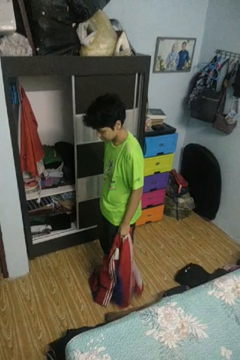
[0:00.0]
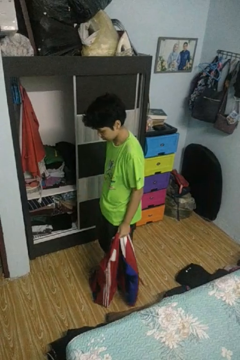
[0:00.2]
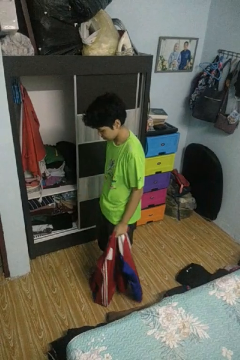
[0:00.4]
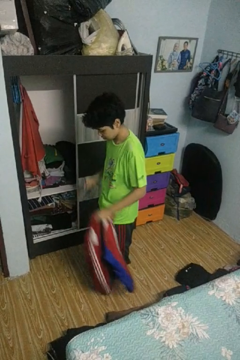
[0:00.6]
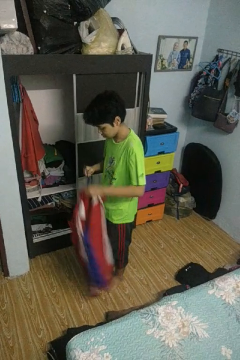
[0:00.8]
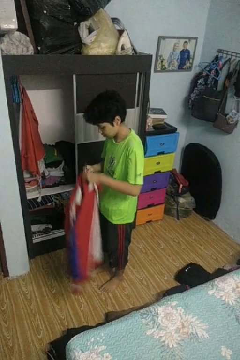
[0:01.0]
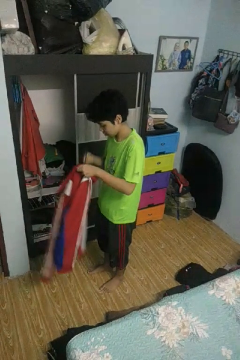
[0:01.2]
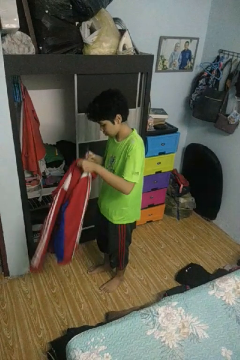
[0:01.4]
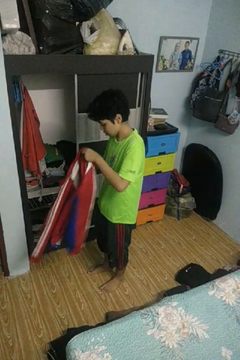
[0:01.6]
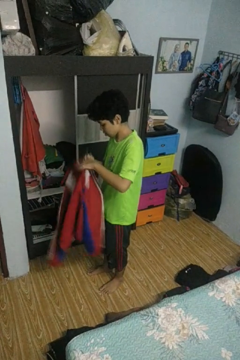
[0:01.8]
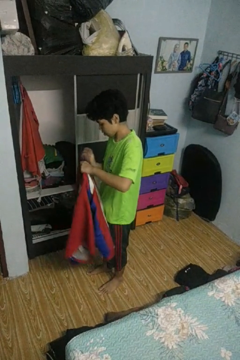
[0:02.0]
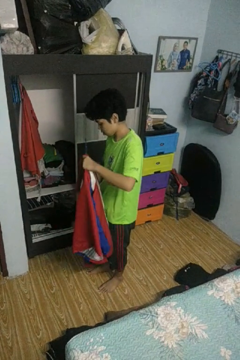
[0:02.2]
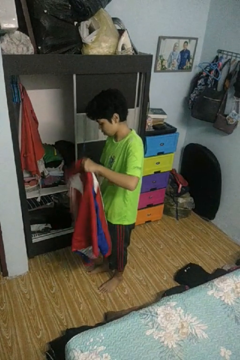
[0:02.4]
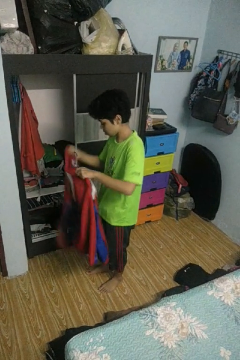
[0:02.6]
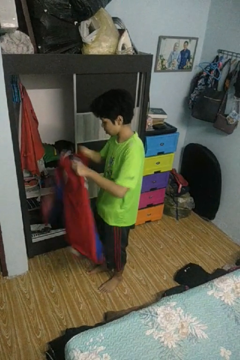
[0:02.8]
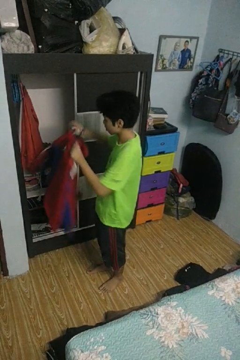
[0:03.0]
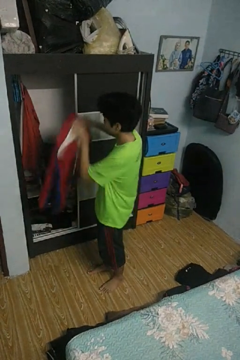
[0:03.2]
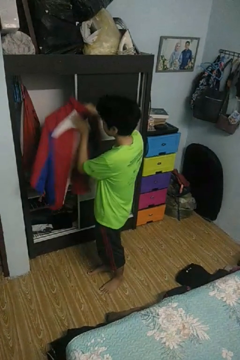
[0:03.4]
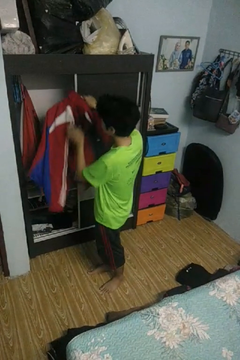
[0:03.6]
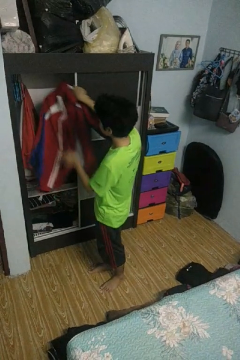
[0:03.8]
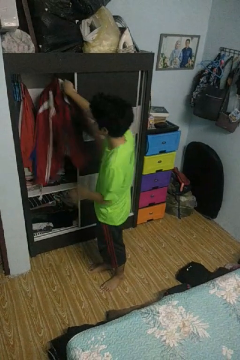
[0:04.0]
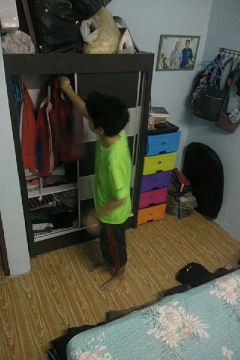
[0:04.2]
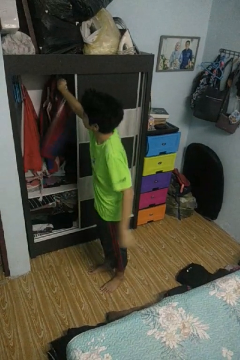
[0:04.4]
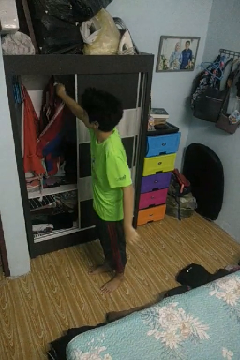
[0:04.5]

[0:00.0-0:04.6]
person puts clothes into closet

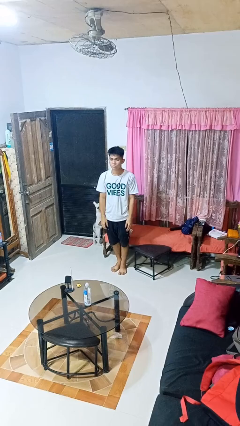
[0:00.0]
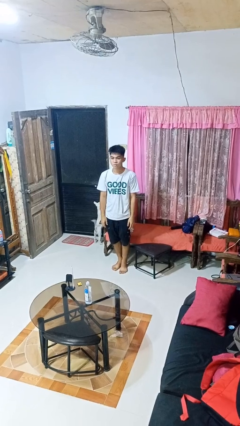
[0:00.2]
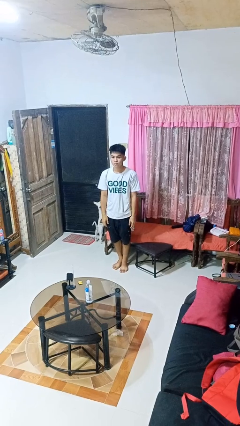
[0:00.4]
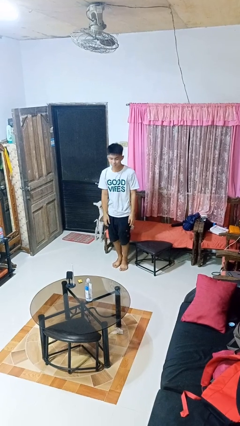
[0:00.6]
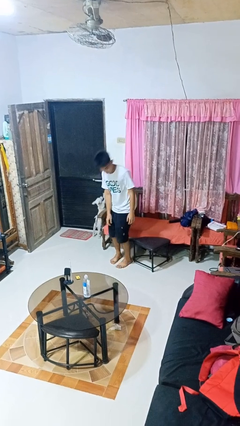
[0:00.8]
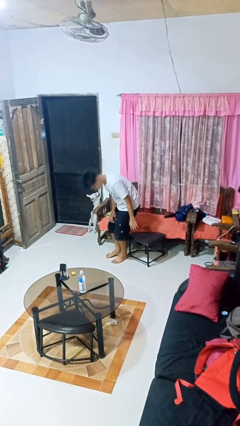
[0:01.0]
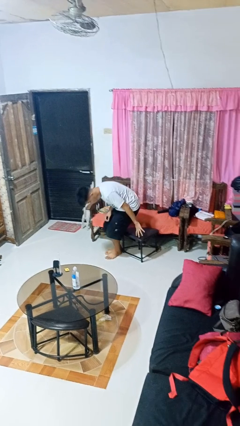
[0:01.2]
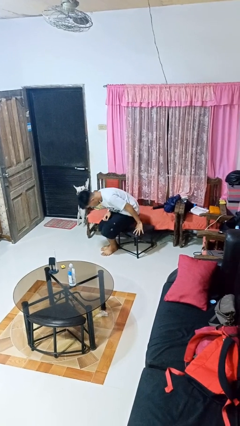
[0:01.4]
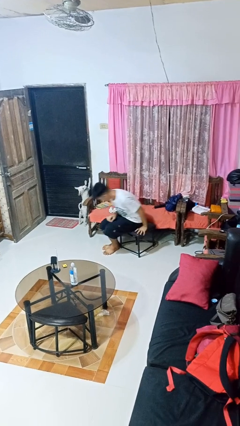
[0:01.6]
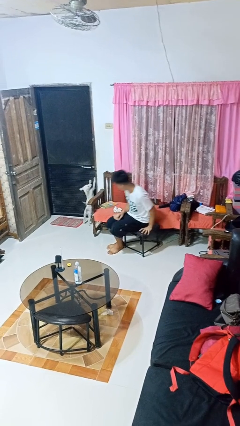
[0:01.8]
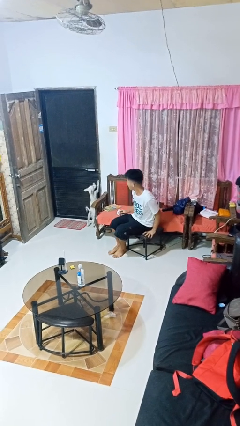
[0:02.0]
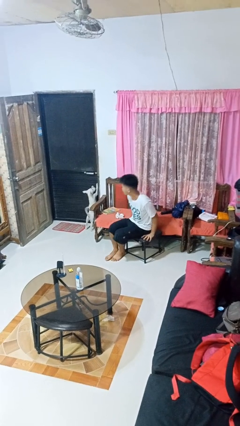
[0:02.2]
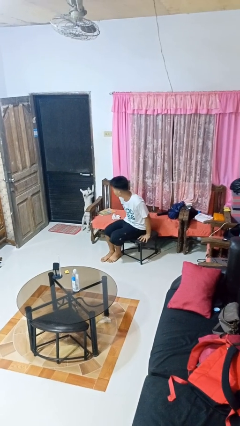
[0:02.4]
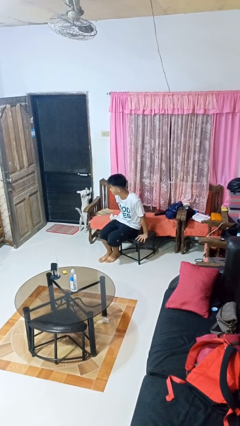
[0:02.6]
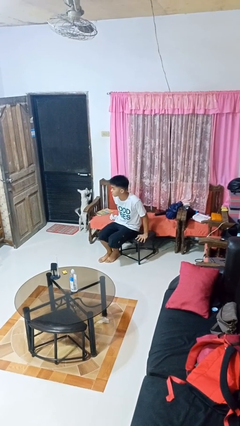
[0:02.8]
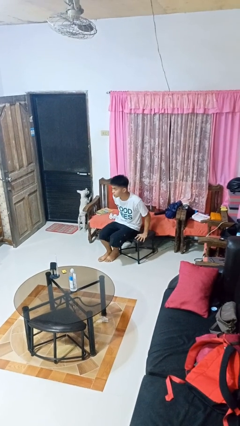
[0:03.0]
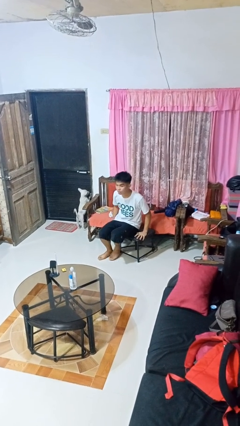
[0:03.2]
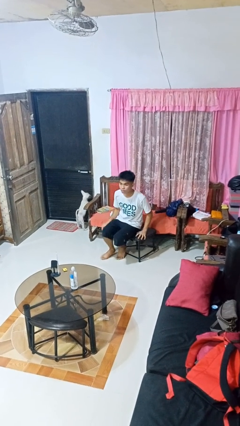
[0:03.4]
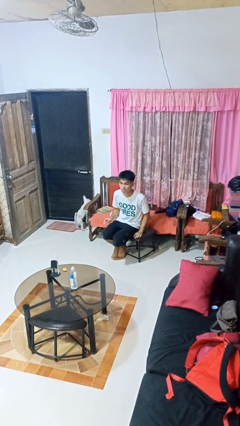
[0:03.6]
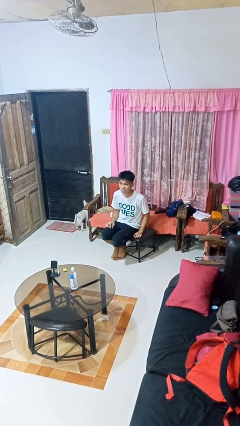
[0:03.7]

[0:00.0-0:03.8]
person sits down

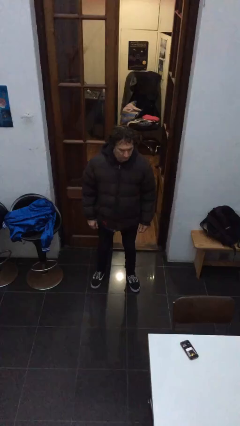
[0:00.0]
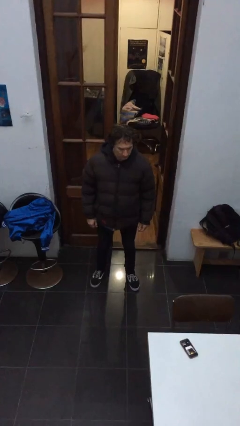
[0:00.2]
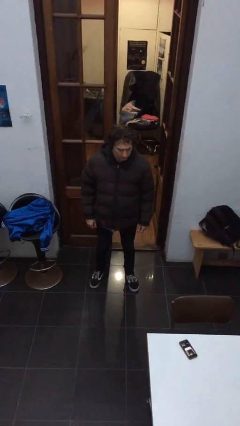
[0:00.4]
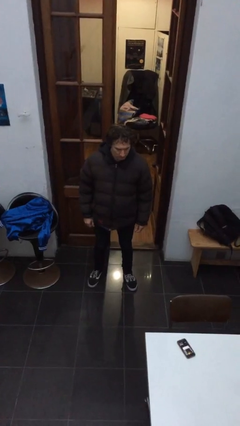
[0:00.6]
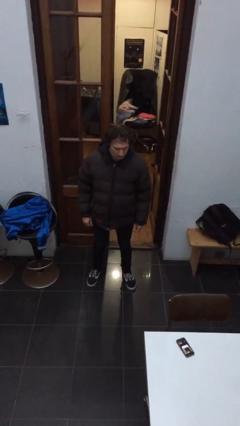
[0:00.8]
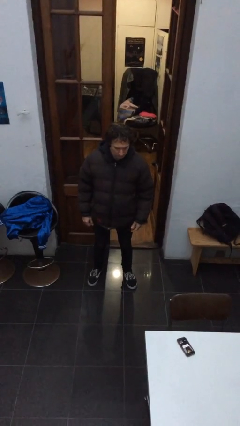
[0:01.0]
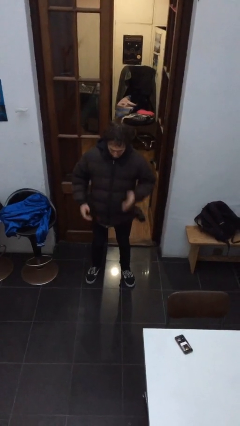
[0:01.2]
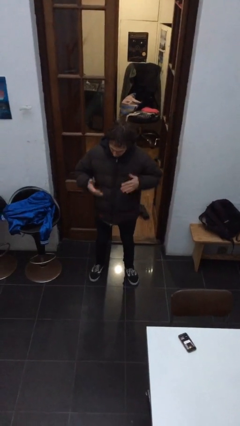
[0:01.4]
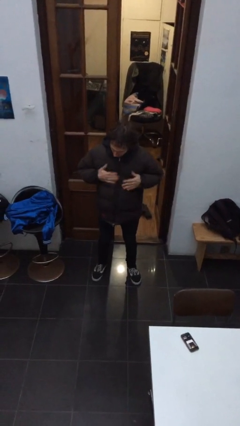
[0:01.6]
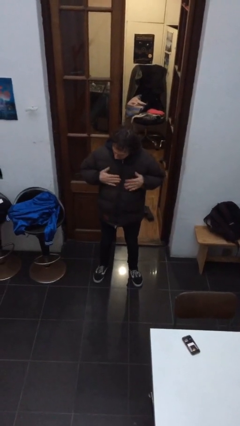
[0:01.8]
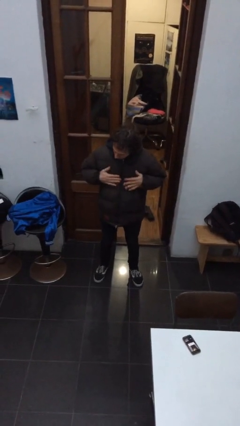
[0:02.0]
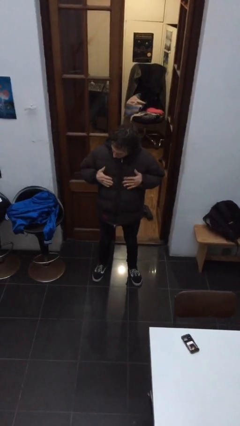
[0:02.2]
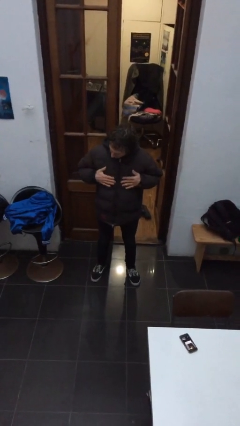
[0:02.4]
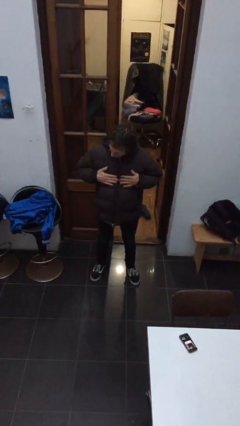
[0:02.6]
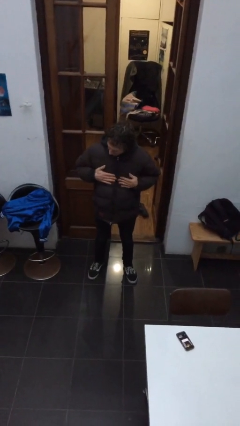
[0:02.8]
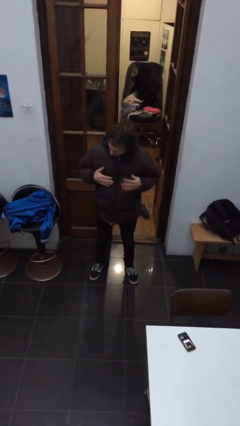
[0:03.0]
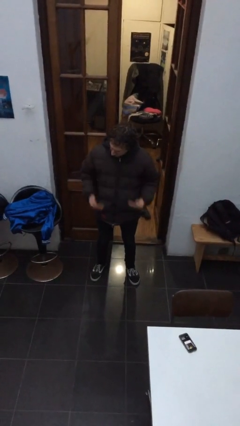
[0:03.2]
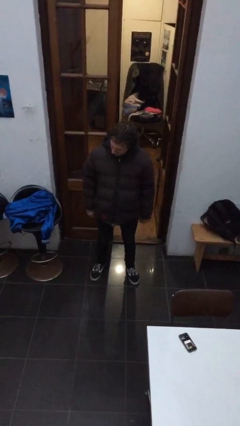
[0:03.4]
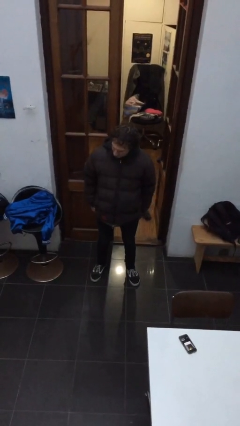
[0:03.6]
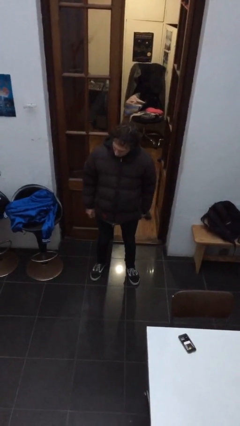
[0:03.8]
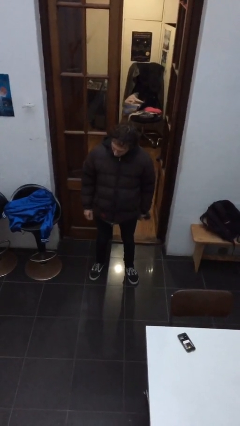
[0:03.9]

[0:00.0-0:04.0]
person drums on chest

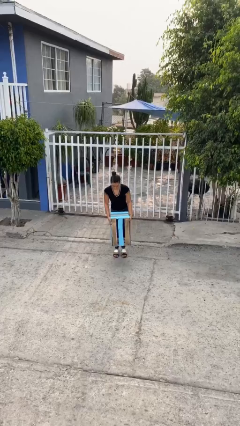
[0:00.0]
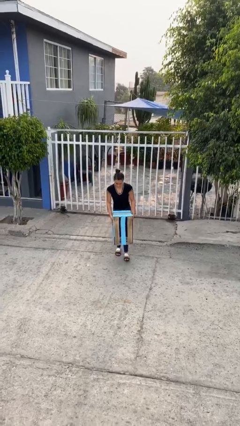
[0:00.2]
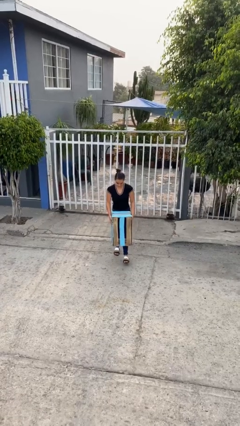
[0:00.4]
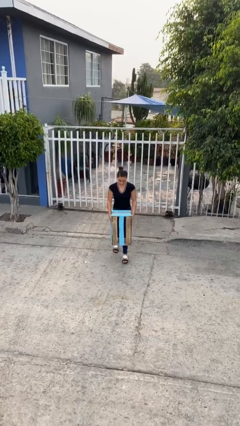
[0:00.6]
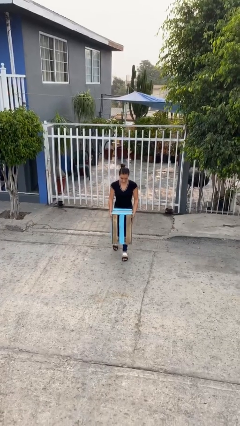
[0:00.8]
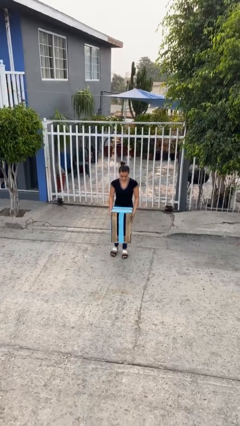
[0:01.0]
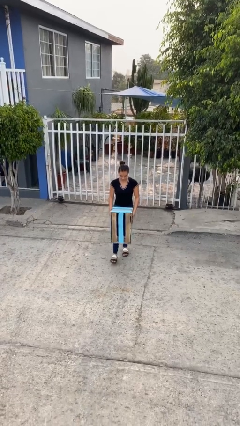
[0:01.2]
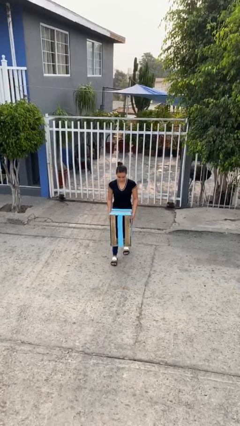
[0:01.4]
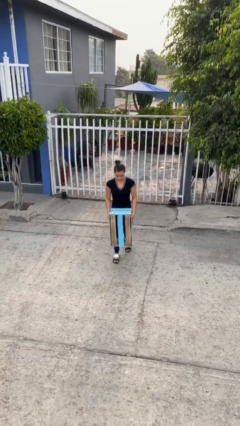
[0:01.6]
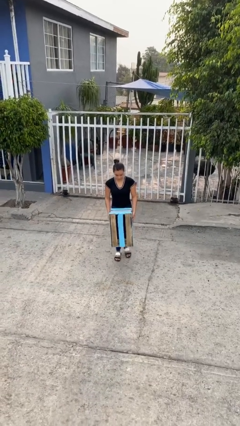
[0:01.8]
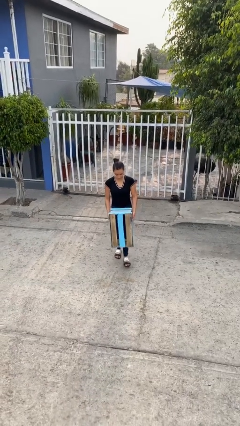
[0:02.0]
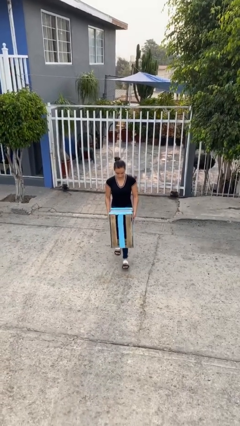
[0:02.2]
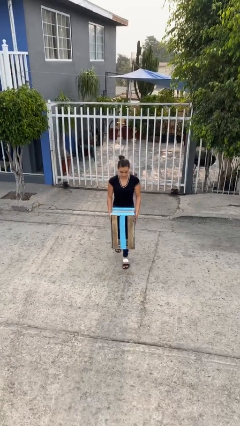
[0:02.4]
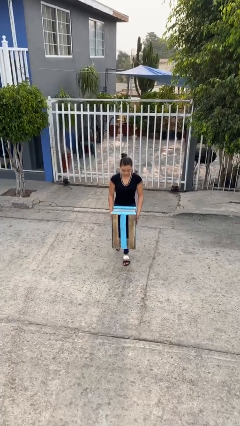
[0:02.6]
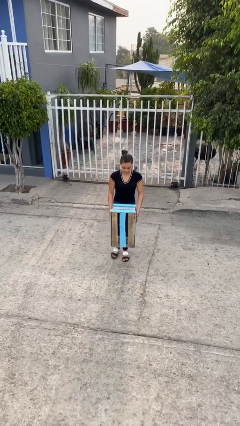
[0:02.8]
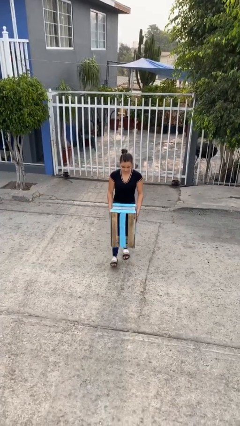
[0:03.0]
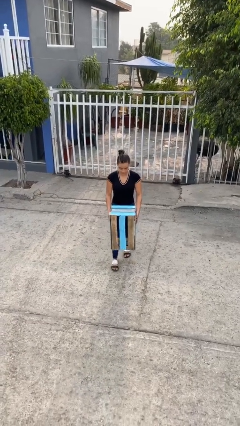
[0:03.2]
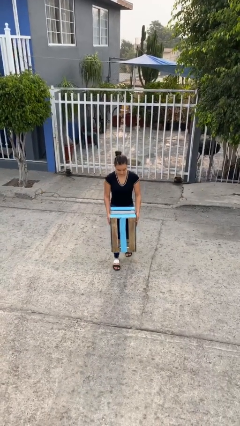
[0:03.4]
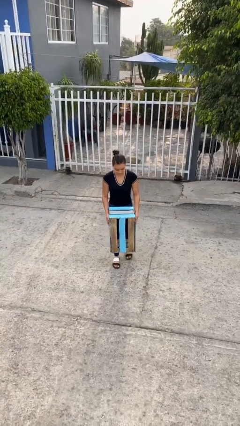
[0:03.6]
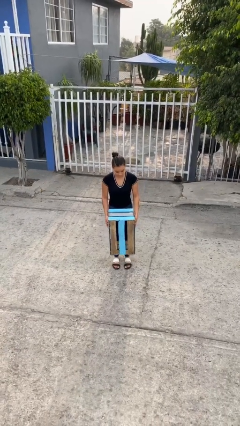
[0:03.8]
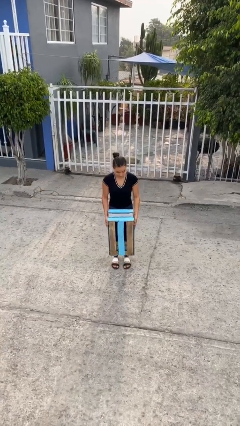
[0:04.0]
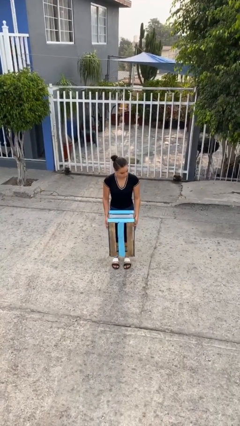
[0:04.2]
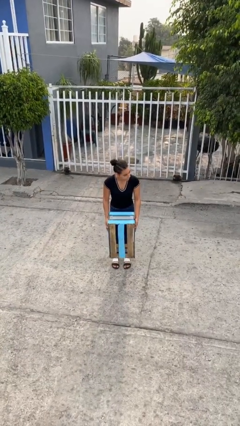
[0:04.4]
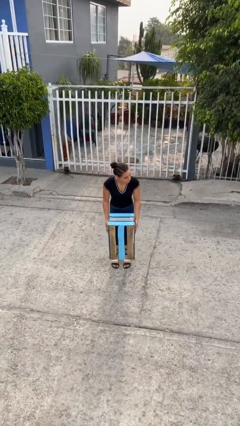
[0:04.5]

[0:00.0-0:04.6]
person carries heavy object

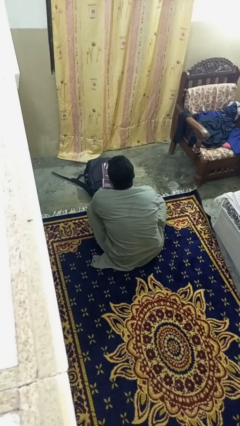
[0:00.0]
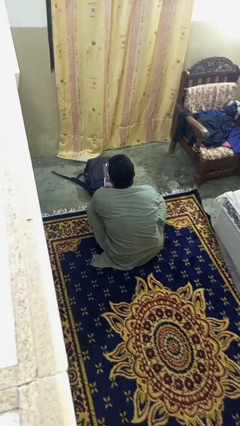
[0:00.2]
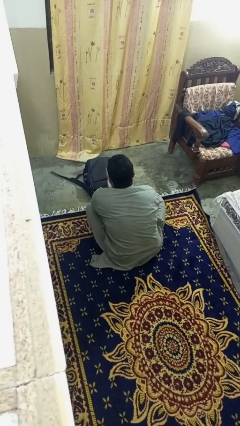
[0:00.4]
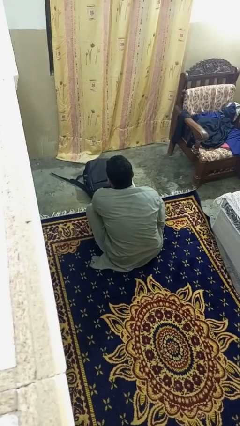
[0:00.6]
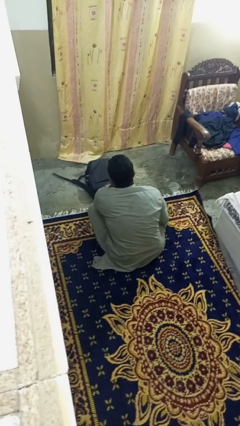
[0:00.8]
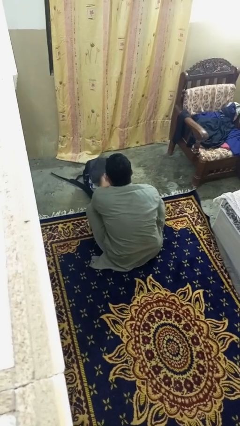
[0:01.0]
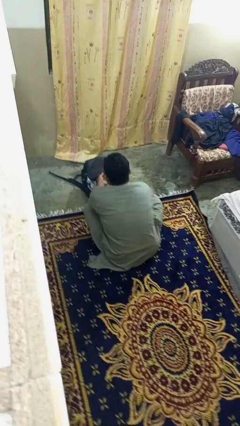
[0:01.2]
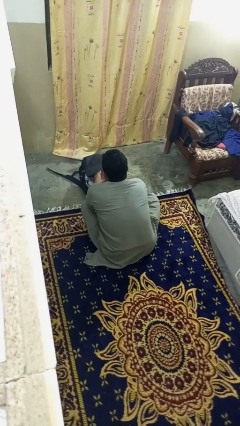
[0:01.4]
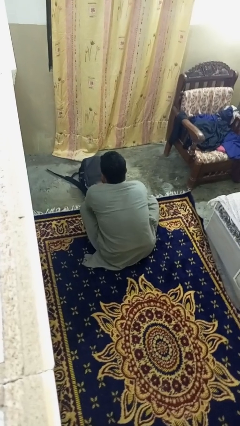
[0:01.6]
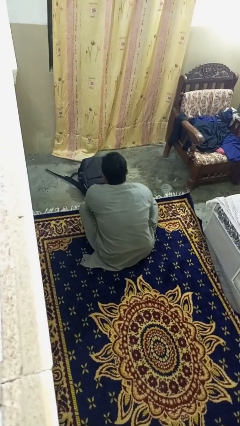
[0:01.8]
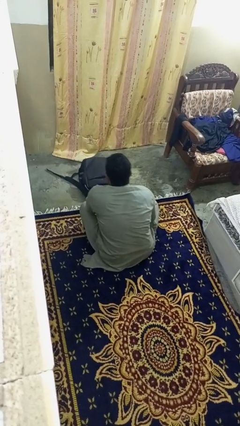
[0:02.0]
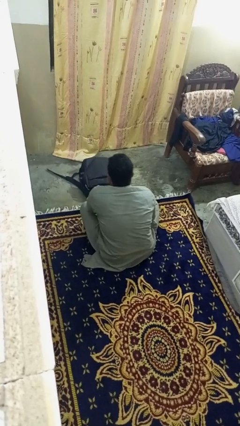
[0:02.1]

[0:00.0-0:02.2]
person puts object into bag
